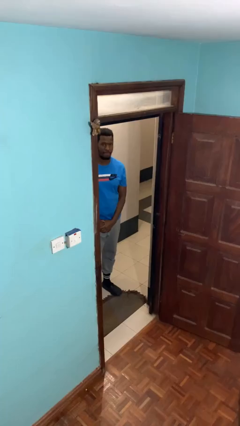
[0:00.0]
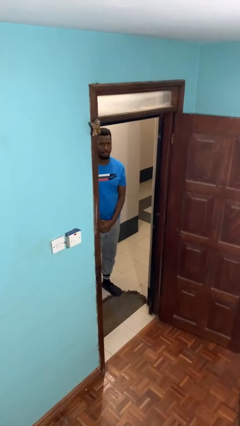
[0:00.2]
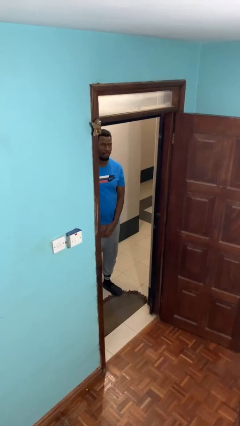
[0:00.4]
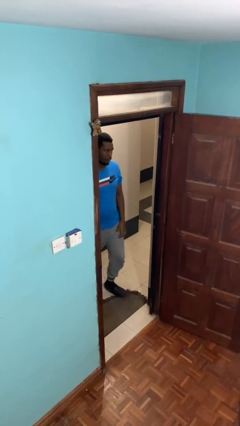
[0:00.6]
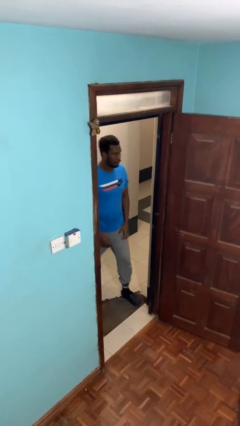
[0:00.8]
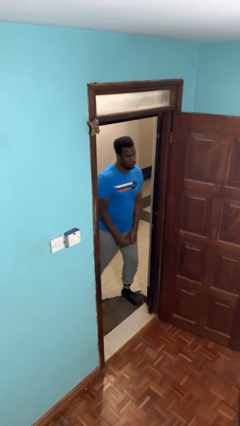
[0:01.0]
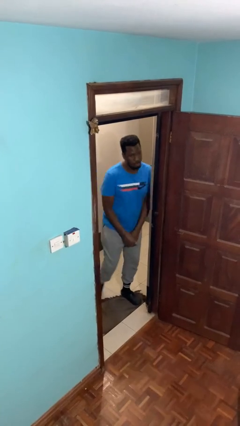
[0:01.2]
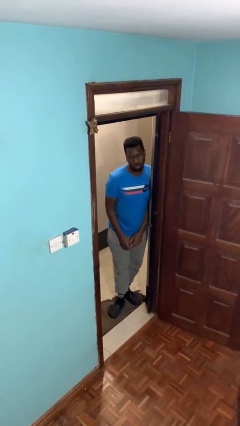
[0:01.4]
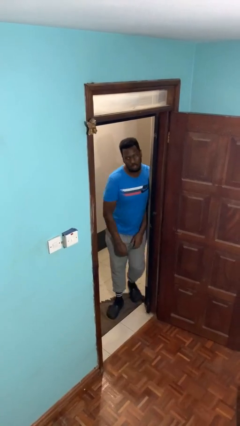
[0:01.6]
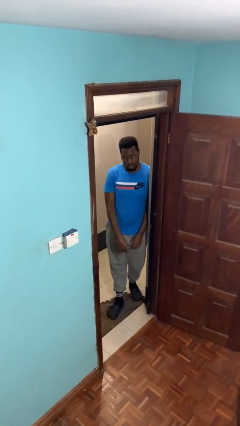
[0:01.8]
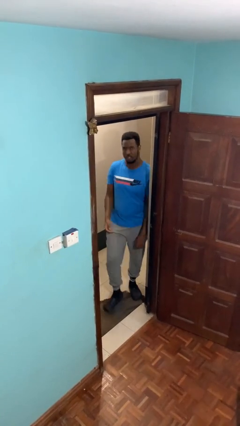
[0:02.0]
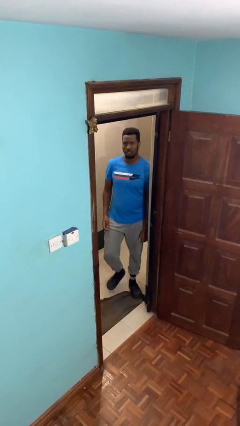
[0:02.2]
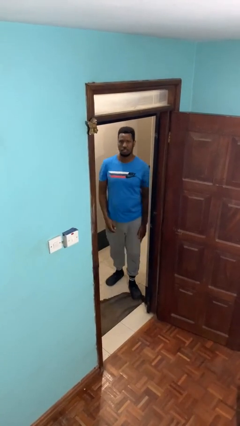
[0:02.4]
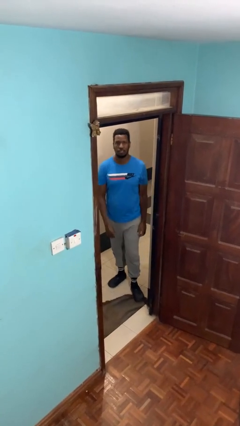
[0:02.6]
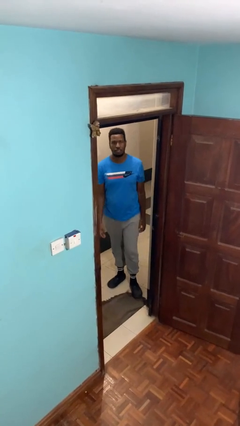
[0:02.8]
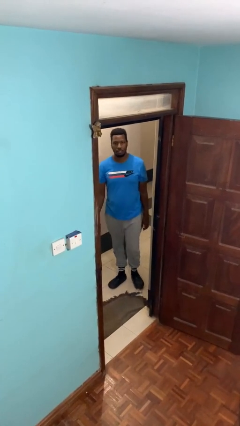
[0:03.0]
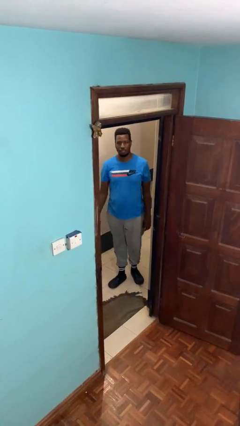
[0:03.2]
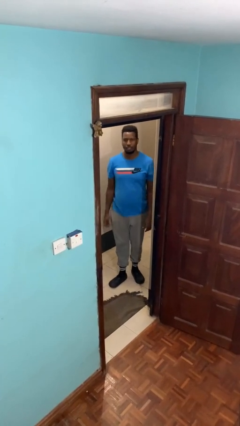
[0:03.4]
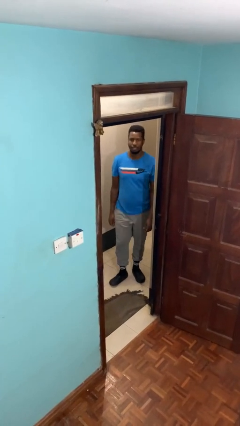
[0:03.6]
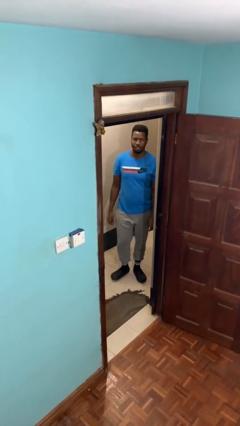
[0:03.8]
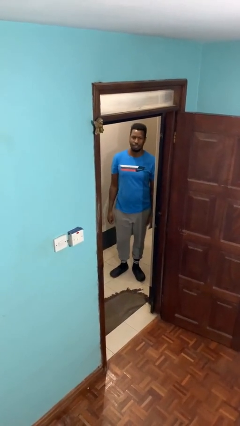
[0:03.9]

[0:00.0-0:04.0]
person bumps into wall

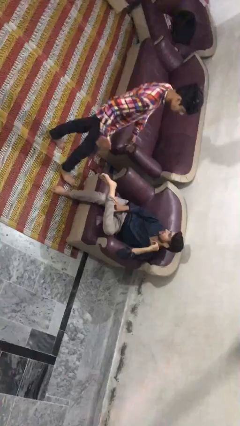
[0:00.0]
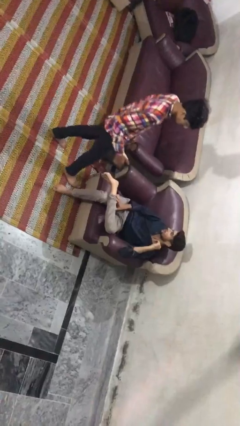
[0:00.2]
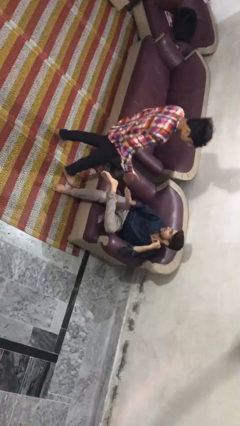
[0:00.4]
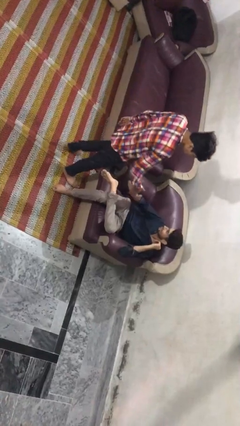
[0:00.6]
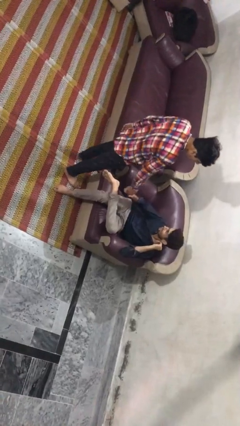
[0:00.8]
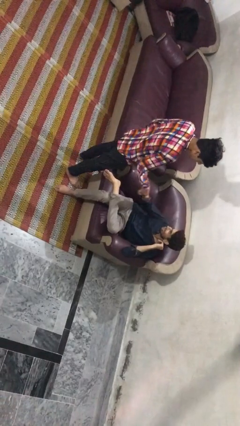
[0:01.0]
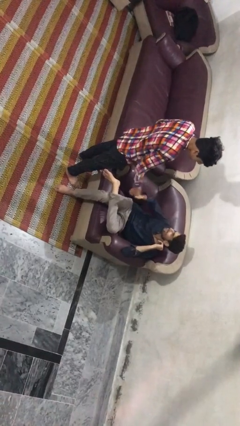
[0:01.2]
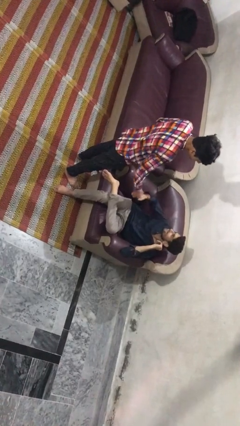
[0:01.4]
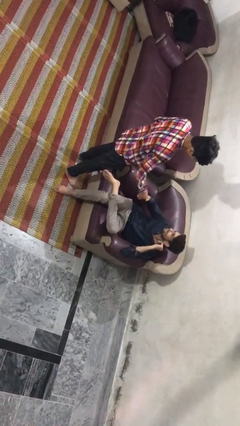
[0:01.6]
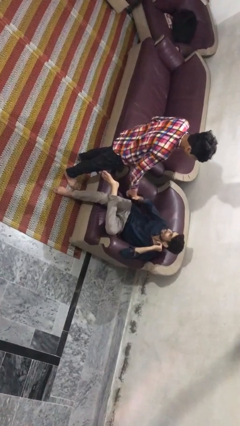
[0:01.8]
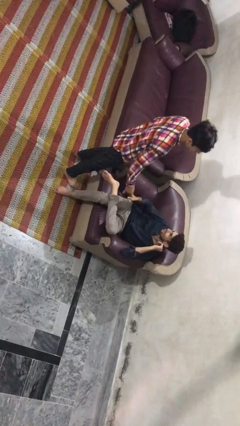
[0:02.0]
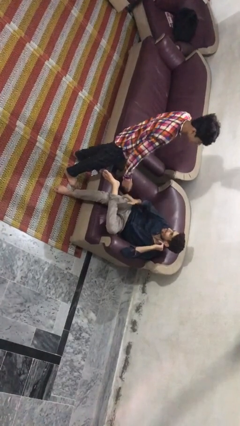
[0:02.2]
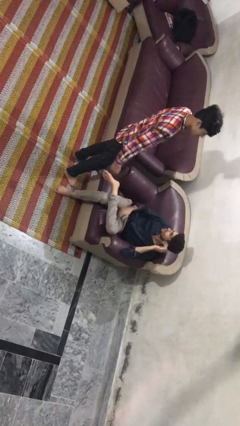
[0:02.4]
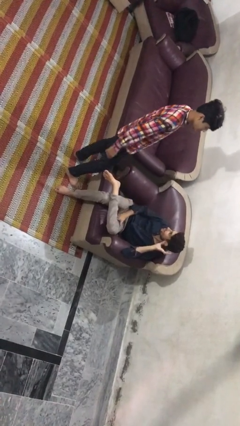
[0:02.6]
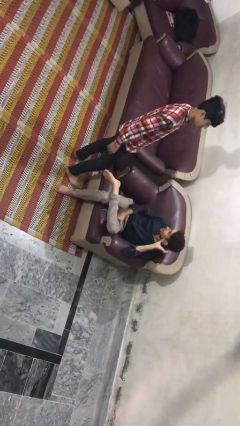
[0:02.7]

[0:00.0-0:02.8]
person shakes hand

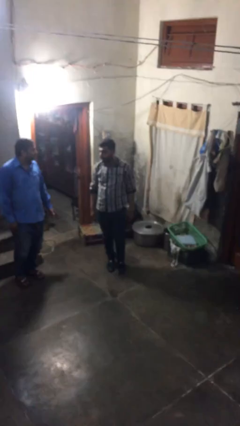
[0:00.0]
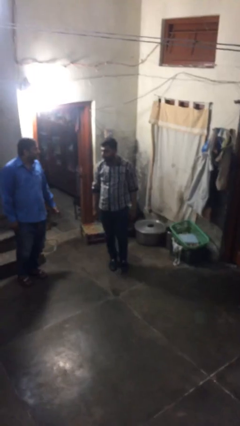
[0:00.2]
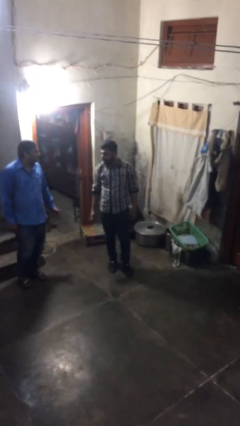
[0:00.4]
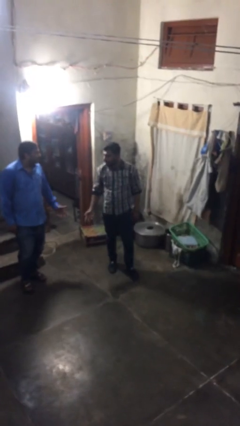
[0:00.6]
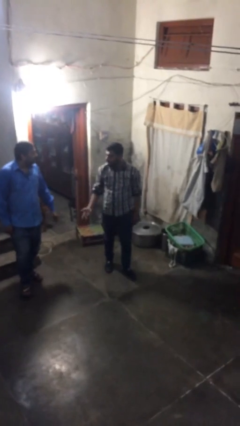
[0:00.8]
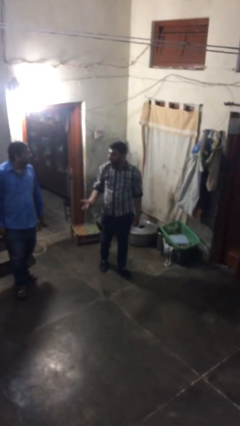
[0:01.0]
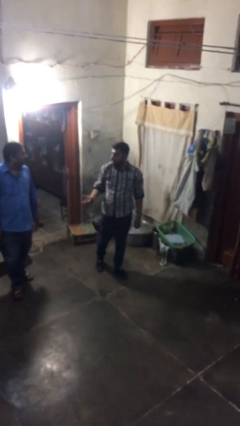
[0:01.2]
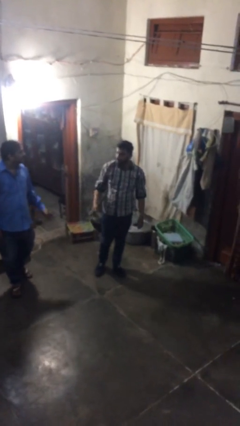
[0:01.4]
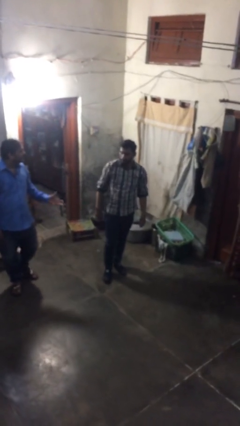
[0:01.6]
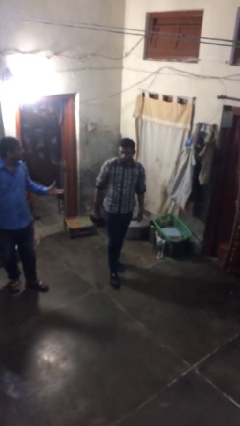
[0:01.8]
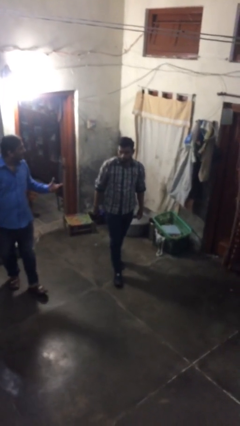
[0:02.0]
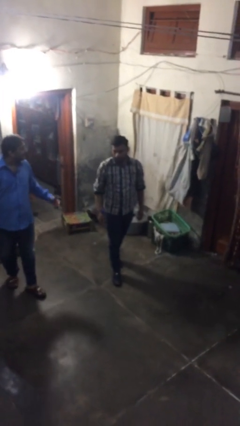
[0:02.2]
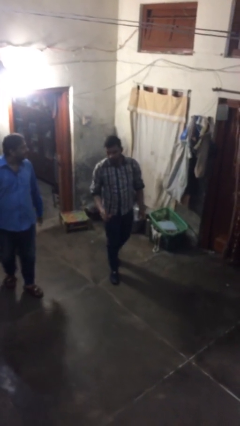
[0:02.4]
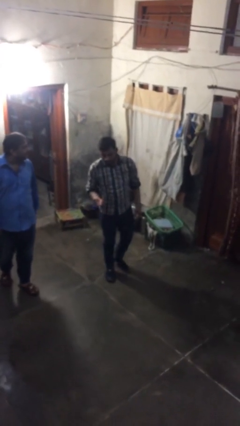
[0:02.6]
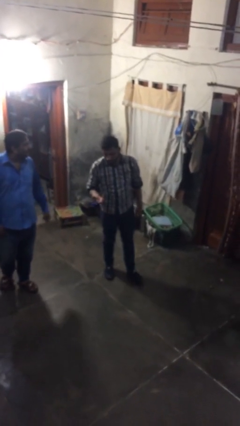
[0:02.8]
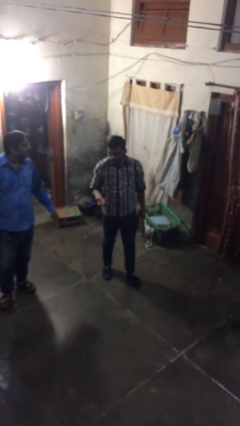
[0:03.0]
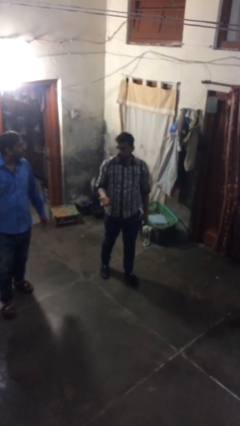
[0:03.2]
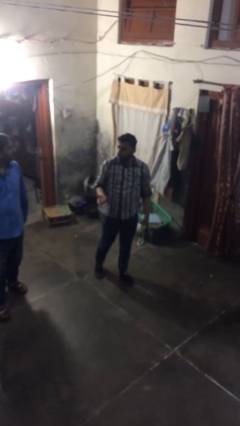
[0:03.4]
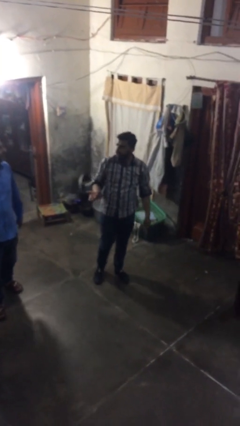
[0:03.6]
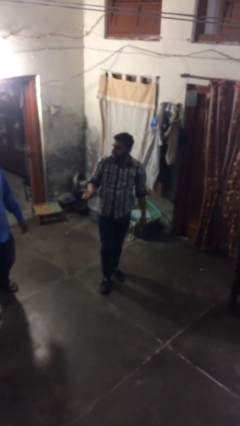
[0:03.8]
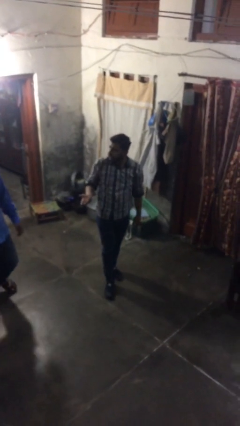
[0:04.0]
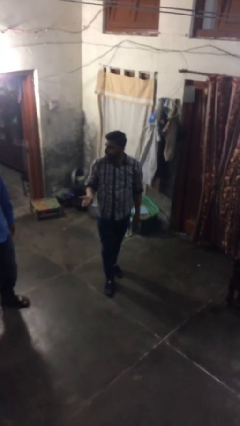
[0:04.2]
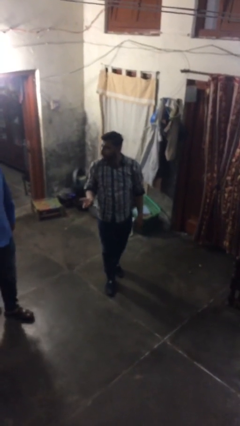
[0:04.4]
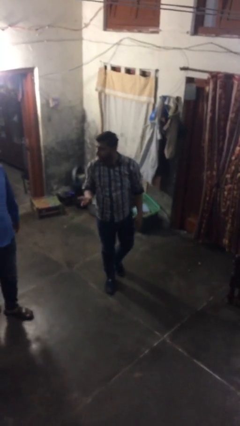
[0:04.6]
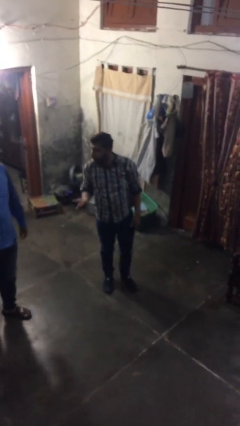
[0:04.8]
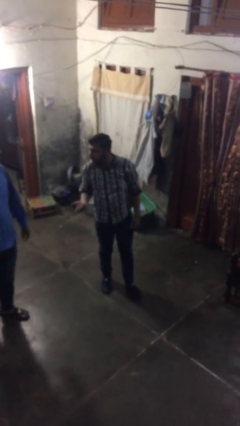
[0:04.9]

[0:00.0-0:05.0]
person talks to person

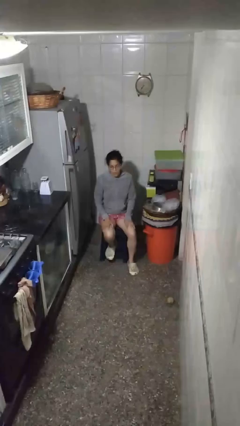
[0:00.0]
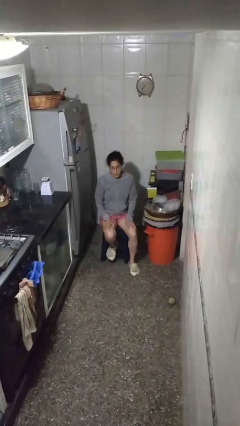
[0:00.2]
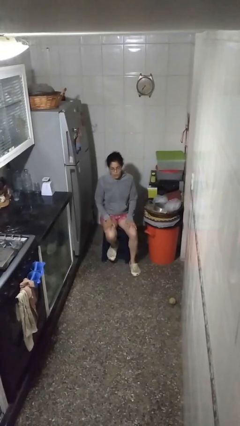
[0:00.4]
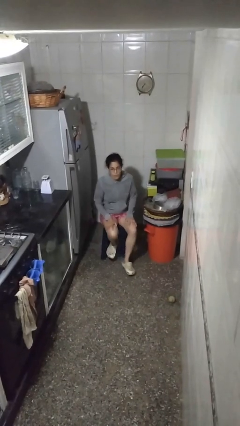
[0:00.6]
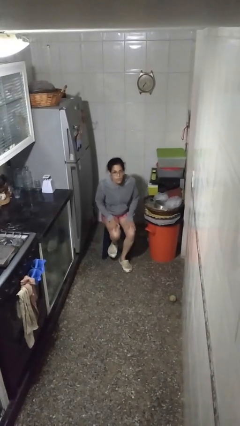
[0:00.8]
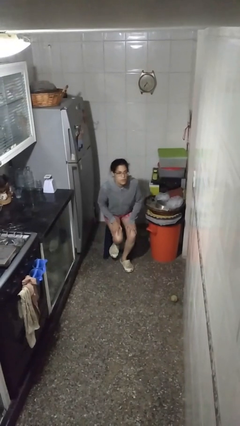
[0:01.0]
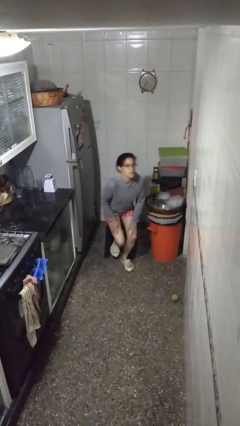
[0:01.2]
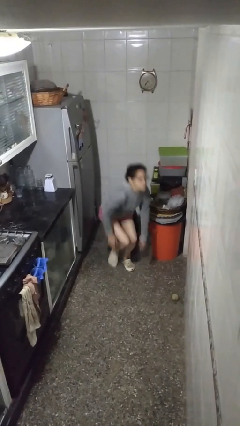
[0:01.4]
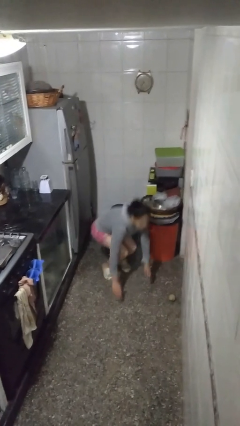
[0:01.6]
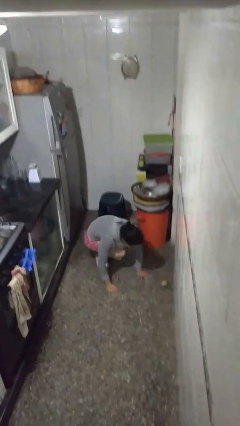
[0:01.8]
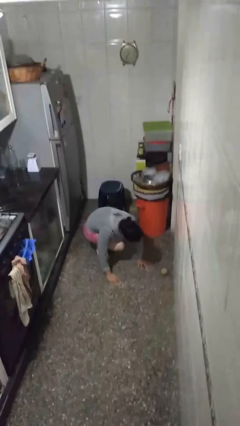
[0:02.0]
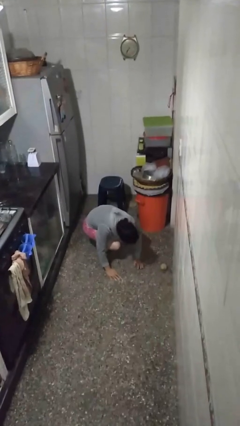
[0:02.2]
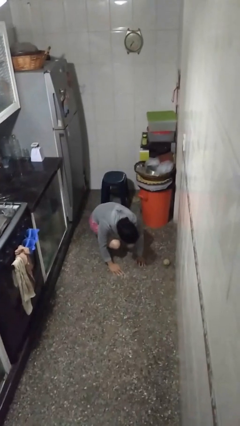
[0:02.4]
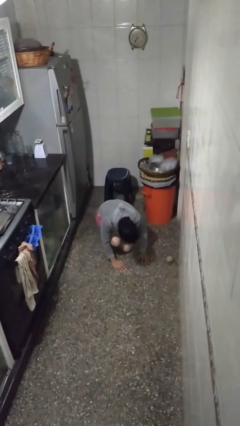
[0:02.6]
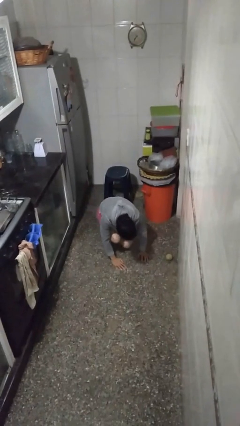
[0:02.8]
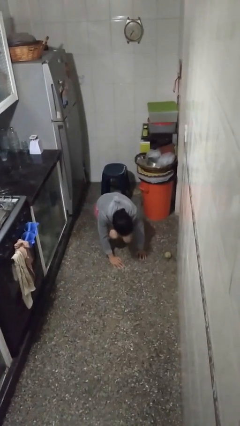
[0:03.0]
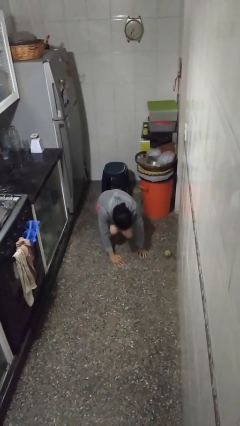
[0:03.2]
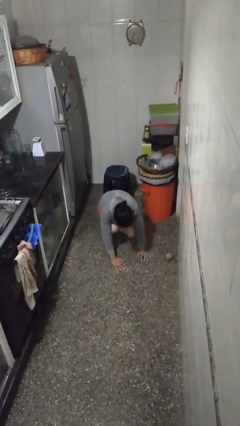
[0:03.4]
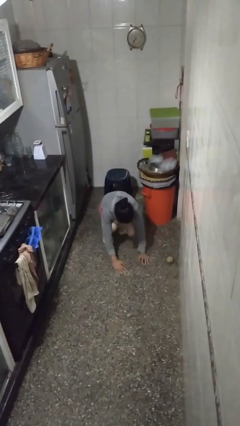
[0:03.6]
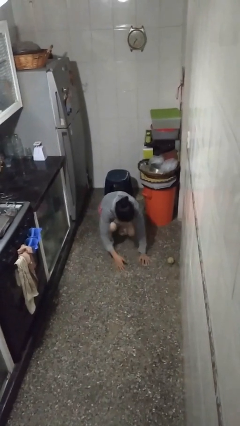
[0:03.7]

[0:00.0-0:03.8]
person falls from chair

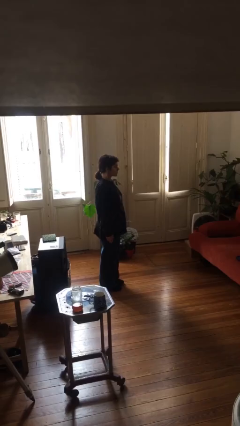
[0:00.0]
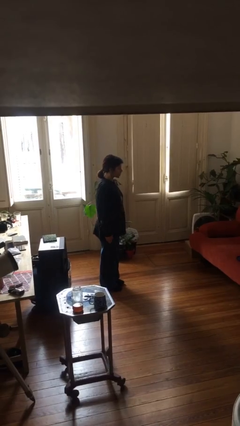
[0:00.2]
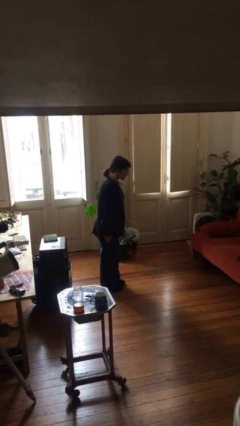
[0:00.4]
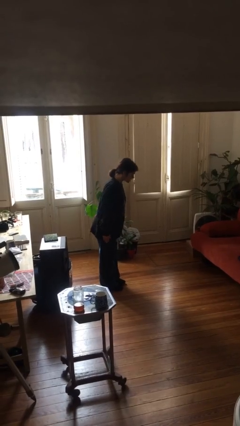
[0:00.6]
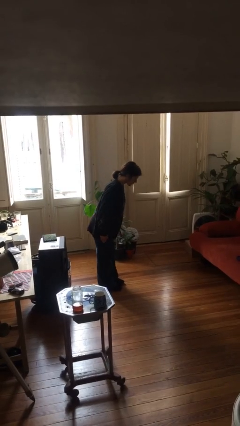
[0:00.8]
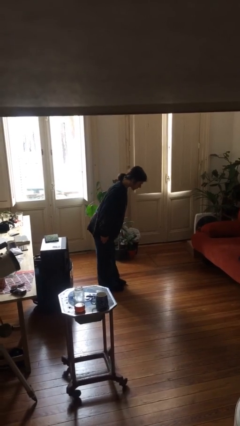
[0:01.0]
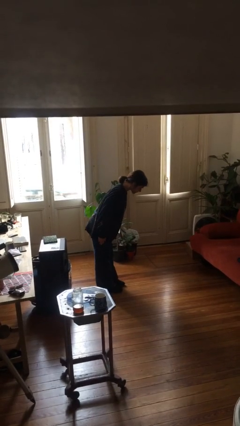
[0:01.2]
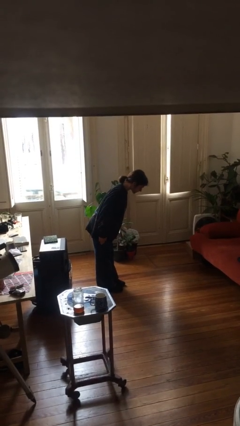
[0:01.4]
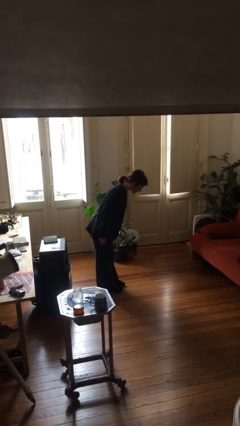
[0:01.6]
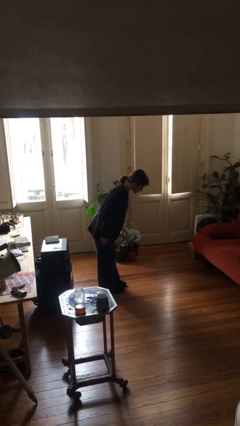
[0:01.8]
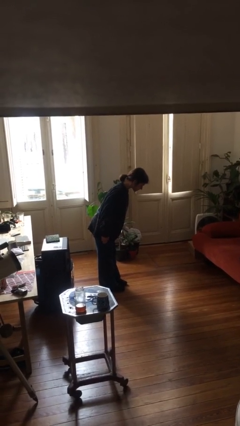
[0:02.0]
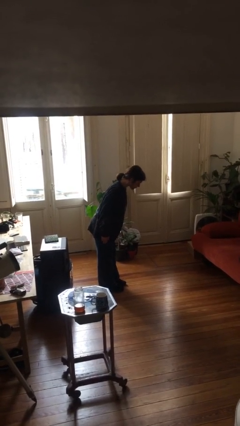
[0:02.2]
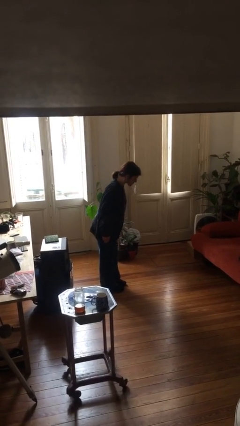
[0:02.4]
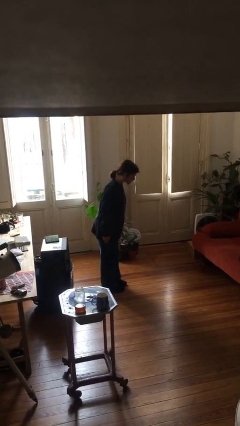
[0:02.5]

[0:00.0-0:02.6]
person bows
